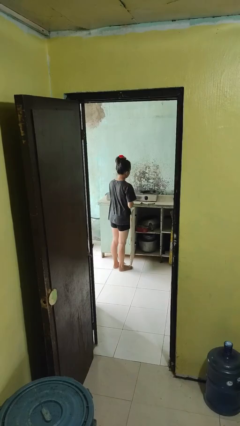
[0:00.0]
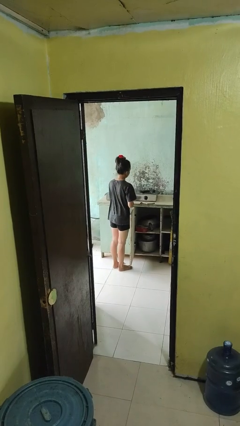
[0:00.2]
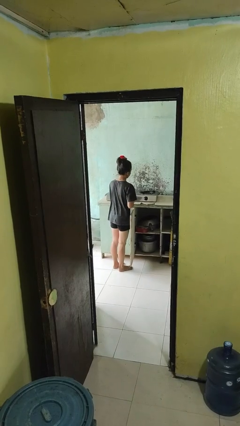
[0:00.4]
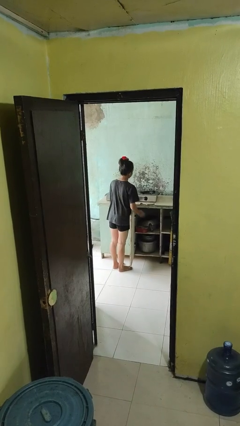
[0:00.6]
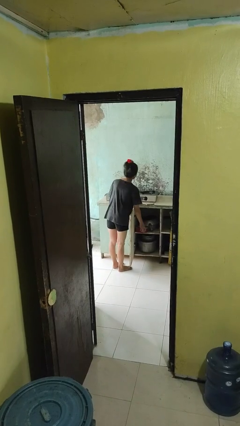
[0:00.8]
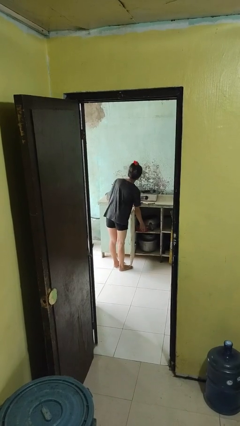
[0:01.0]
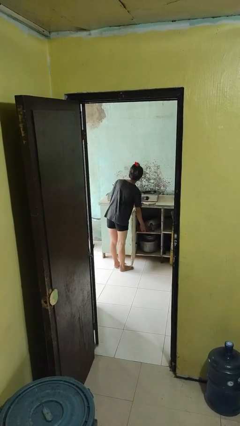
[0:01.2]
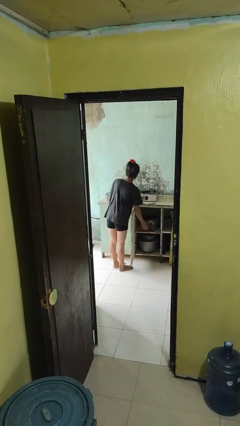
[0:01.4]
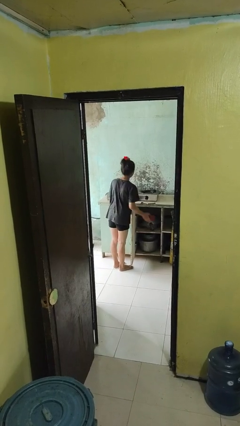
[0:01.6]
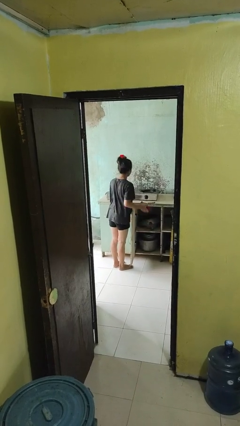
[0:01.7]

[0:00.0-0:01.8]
person takes object from cabinet

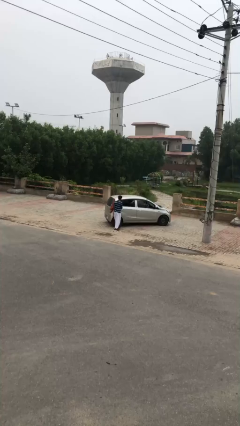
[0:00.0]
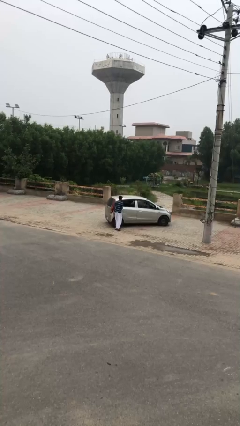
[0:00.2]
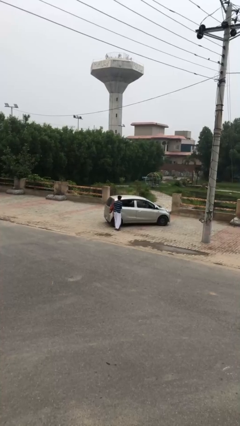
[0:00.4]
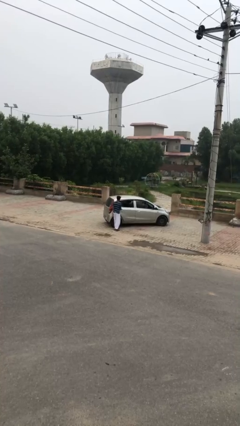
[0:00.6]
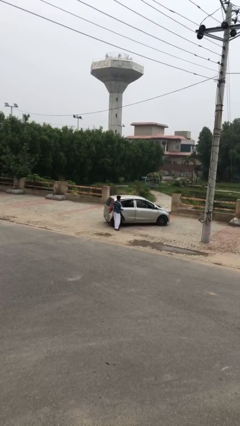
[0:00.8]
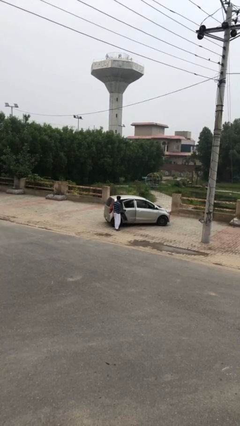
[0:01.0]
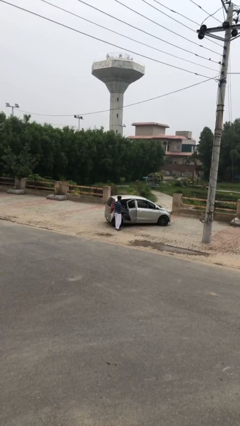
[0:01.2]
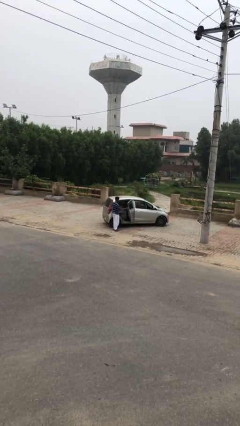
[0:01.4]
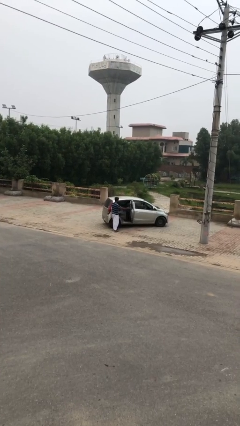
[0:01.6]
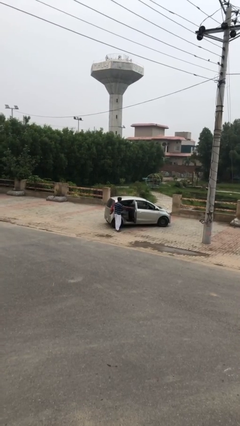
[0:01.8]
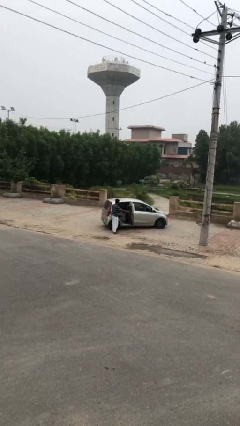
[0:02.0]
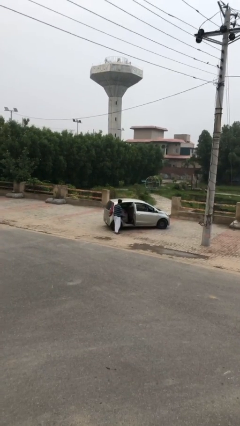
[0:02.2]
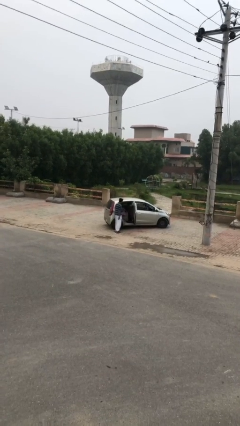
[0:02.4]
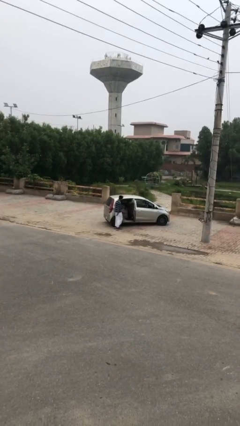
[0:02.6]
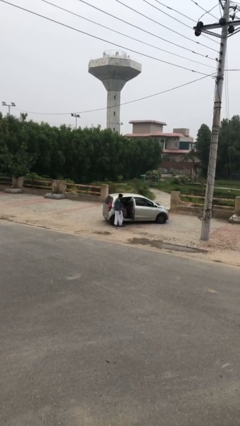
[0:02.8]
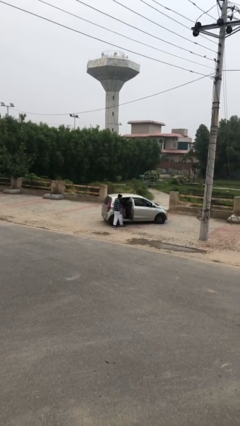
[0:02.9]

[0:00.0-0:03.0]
person opens car door

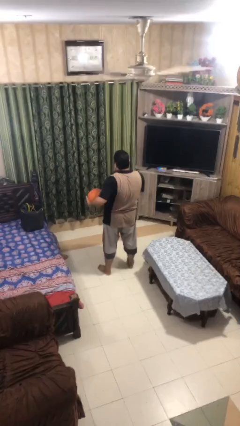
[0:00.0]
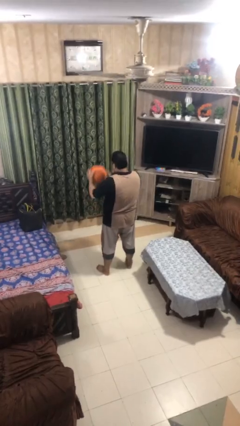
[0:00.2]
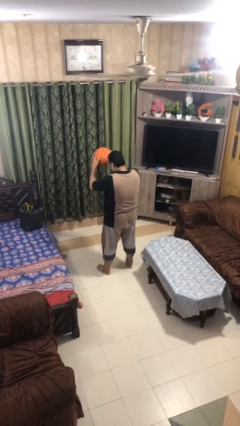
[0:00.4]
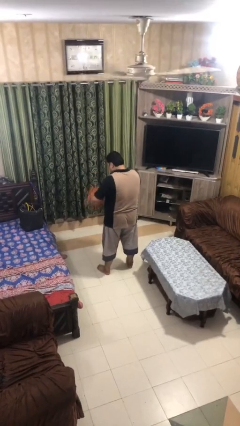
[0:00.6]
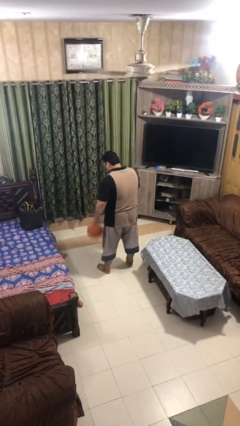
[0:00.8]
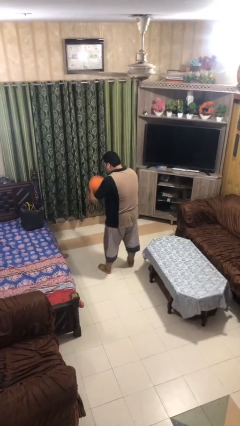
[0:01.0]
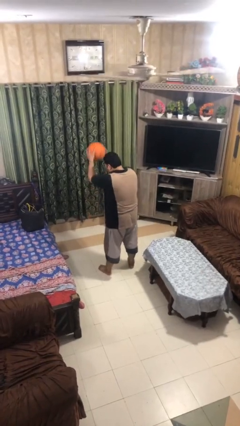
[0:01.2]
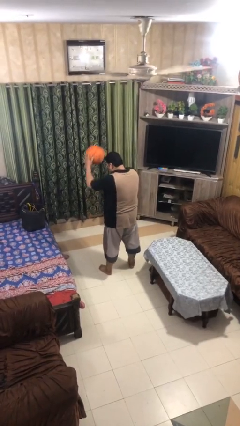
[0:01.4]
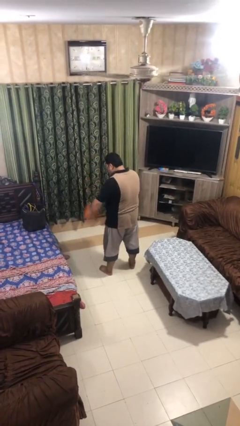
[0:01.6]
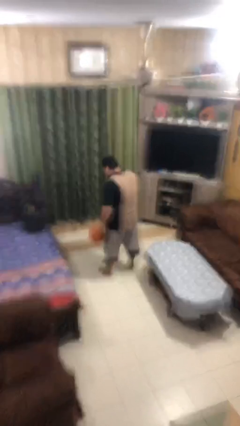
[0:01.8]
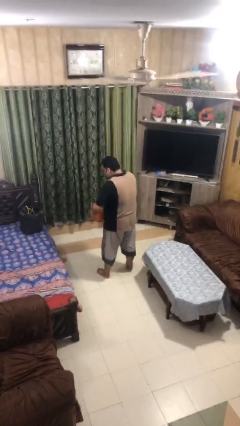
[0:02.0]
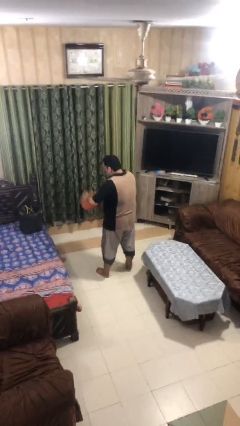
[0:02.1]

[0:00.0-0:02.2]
person bounces ball on floor

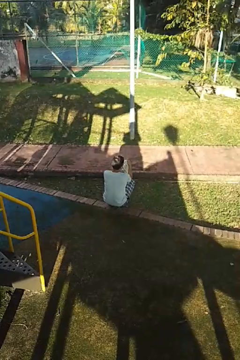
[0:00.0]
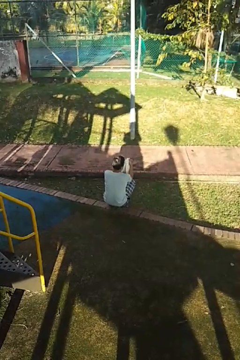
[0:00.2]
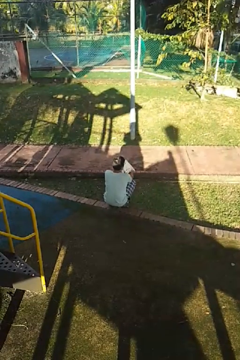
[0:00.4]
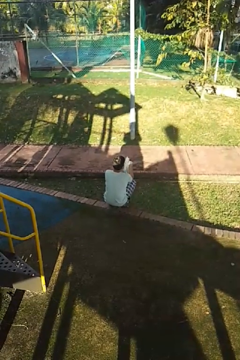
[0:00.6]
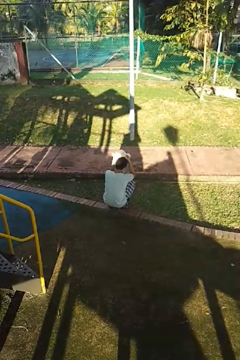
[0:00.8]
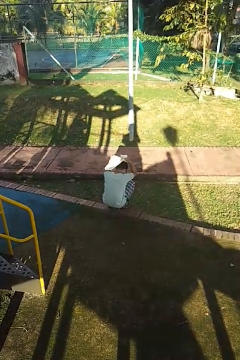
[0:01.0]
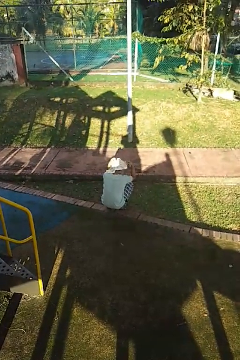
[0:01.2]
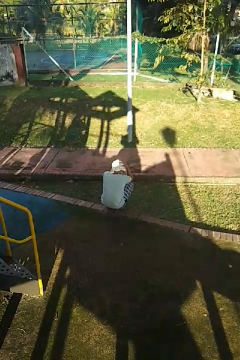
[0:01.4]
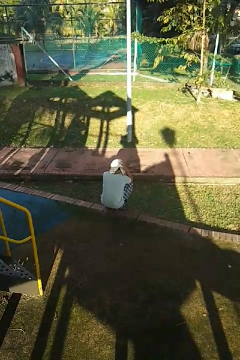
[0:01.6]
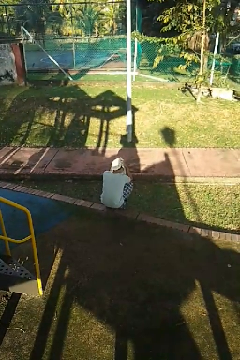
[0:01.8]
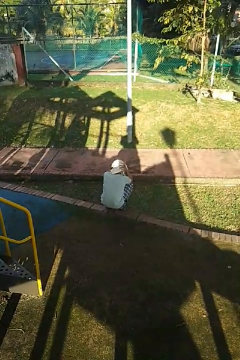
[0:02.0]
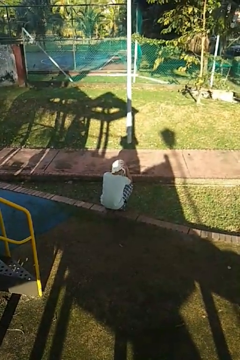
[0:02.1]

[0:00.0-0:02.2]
person dries hair with towel

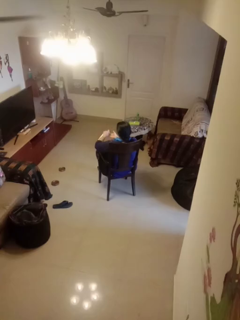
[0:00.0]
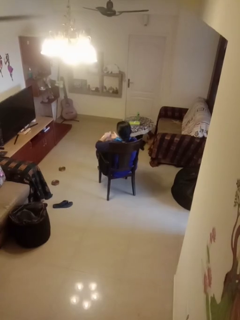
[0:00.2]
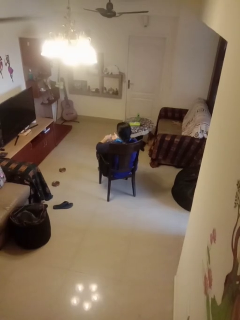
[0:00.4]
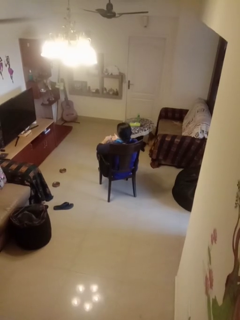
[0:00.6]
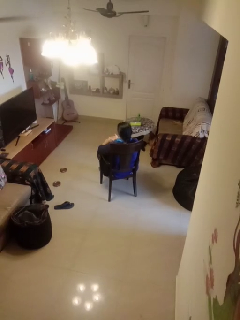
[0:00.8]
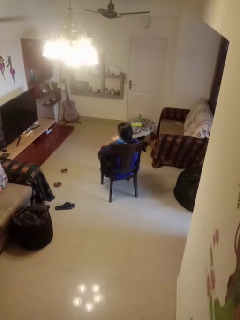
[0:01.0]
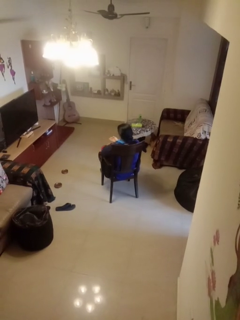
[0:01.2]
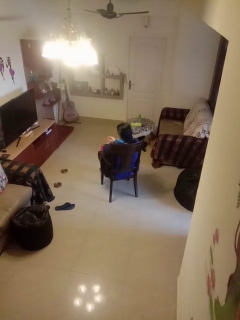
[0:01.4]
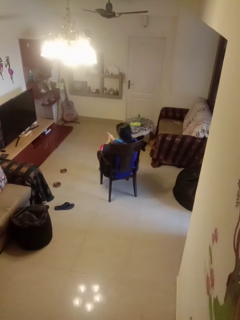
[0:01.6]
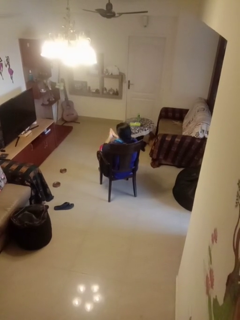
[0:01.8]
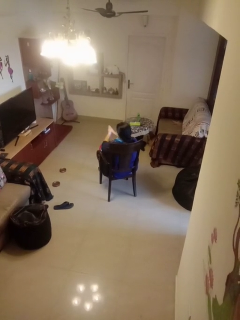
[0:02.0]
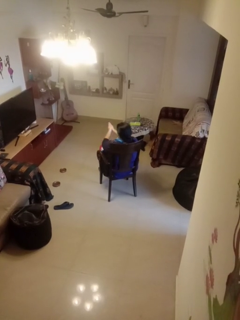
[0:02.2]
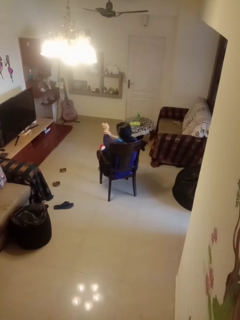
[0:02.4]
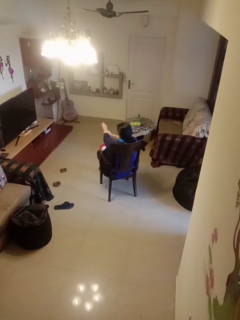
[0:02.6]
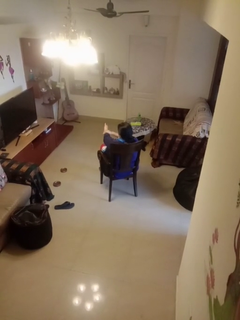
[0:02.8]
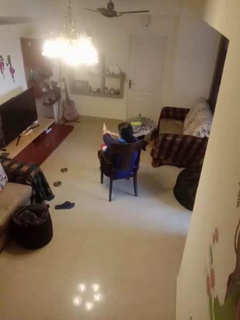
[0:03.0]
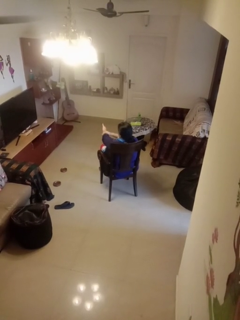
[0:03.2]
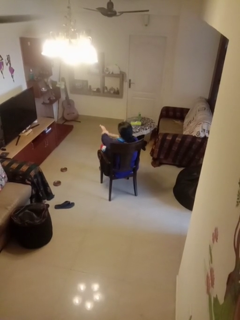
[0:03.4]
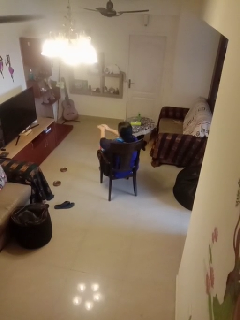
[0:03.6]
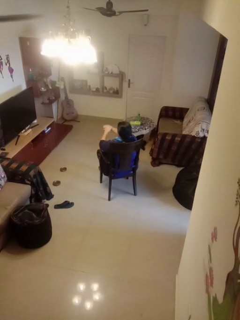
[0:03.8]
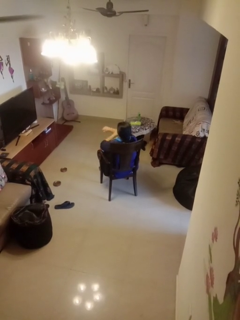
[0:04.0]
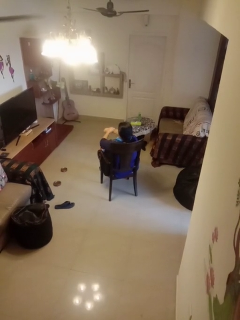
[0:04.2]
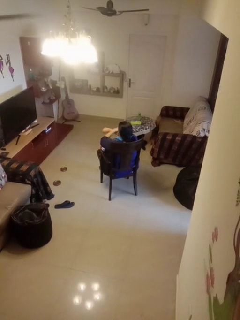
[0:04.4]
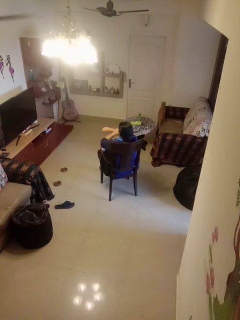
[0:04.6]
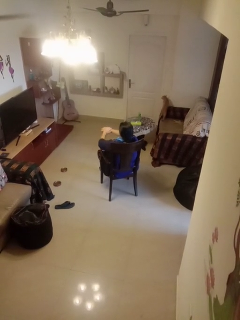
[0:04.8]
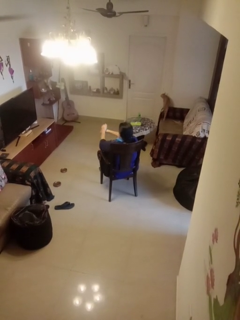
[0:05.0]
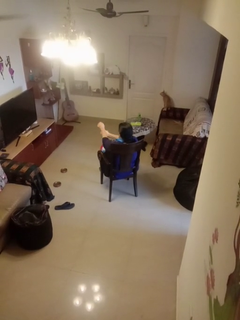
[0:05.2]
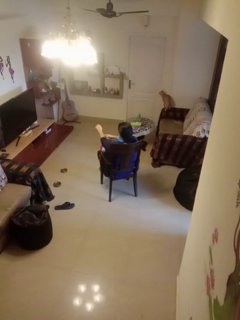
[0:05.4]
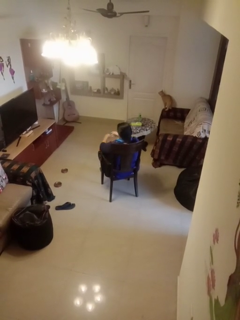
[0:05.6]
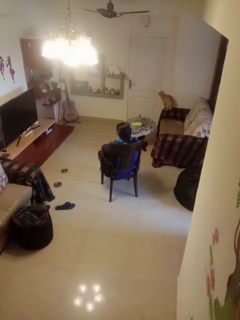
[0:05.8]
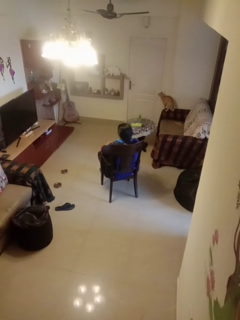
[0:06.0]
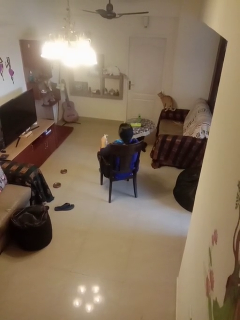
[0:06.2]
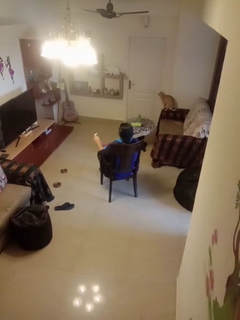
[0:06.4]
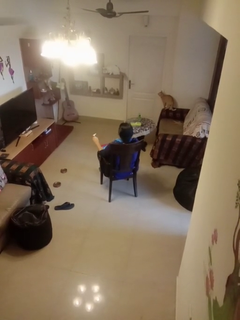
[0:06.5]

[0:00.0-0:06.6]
person applies sunscreen

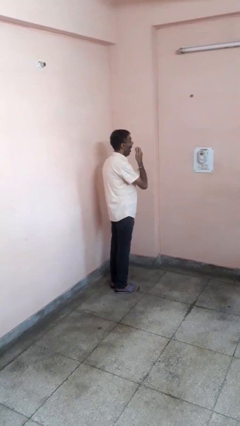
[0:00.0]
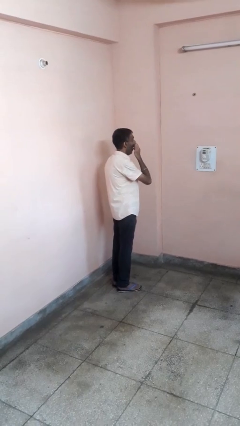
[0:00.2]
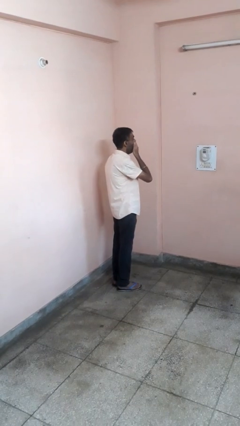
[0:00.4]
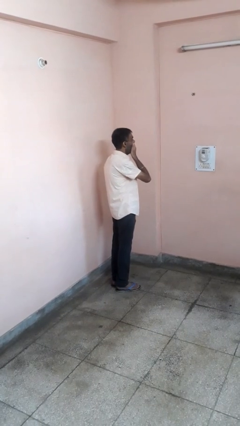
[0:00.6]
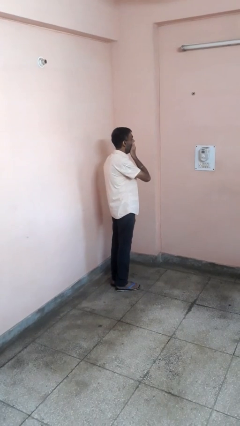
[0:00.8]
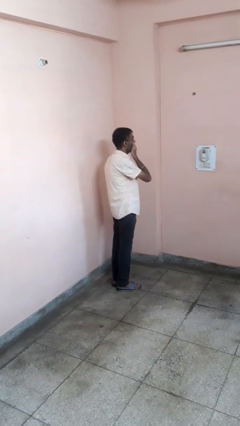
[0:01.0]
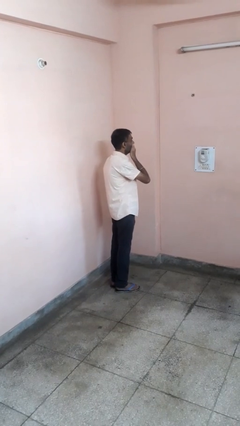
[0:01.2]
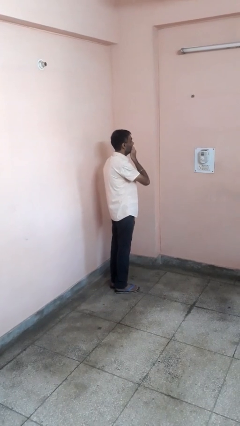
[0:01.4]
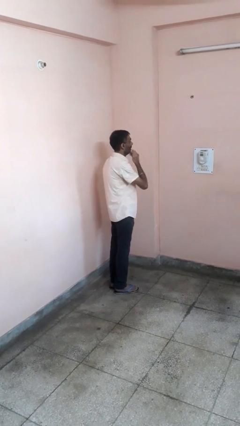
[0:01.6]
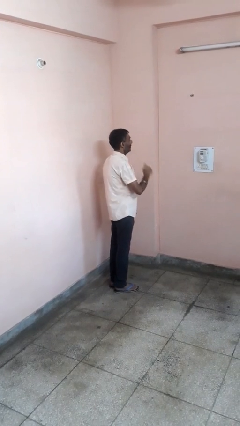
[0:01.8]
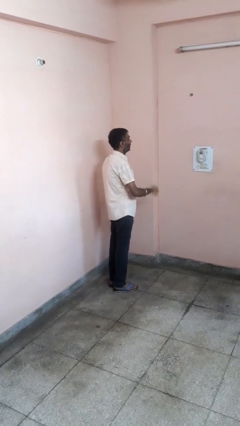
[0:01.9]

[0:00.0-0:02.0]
person yawns

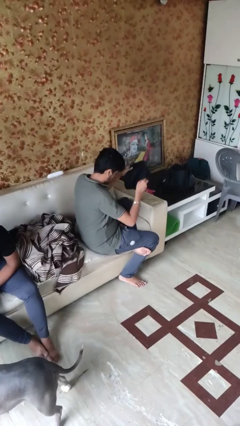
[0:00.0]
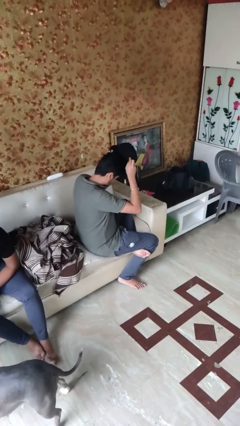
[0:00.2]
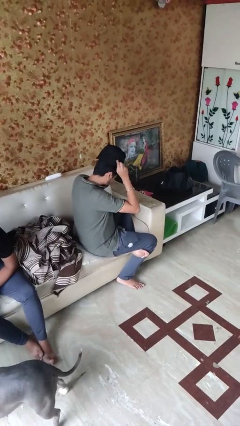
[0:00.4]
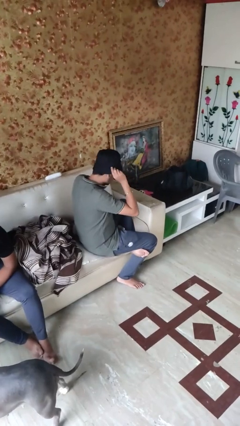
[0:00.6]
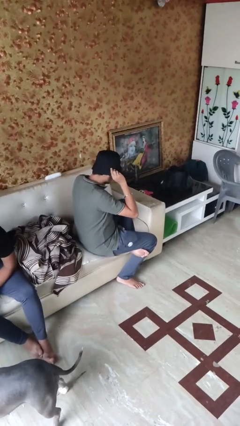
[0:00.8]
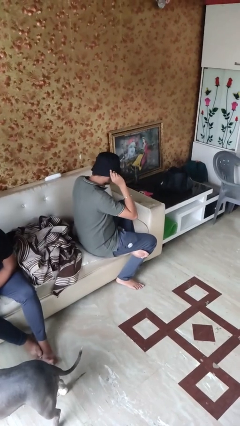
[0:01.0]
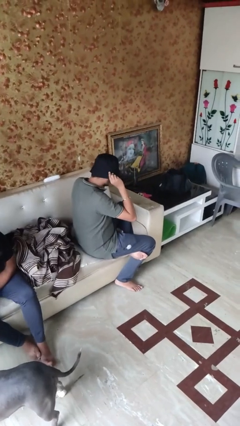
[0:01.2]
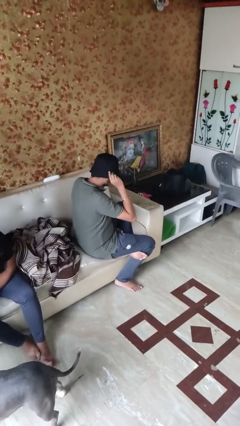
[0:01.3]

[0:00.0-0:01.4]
person puts on hat
